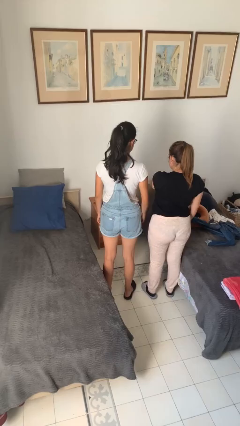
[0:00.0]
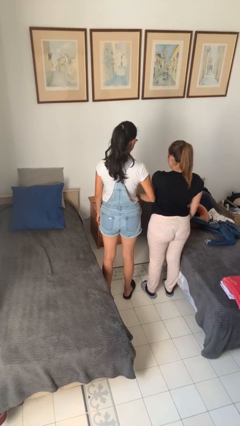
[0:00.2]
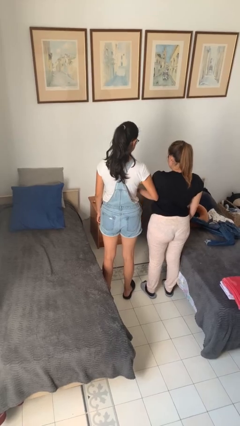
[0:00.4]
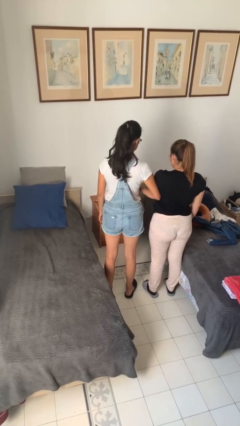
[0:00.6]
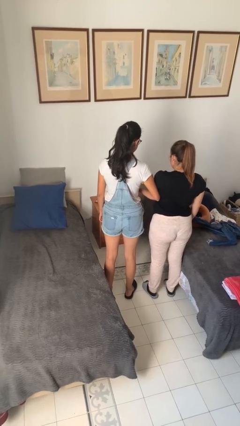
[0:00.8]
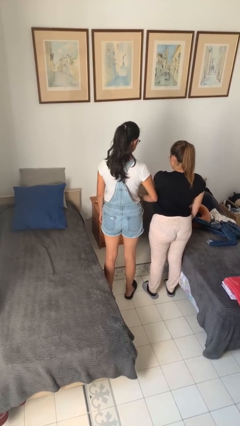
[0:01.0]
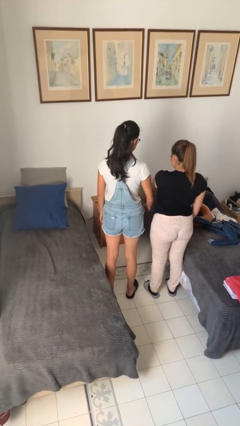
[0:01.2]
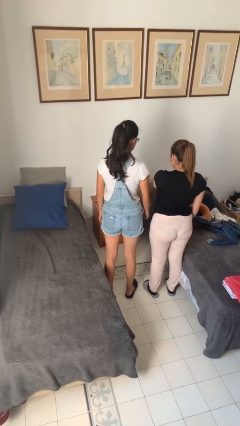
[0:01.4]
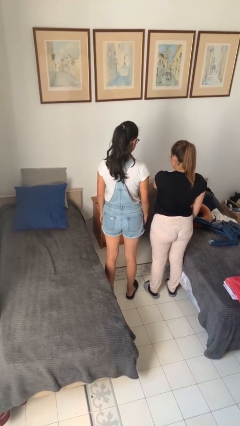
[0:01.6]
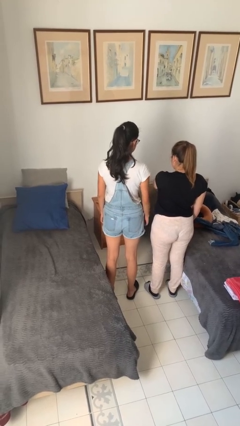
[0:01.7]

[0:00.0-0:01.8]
person nudges person with elbow

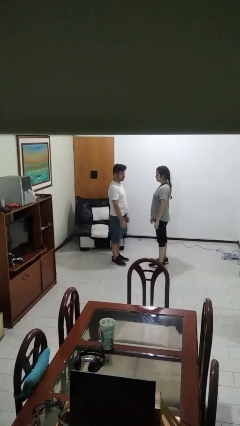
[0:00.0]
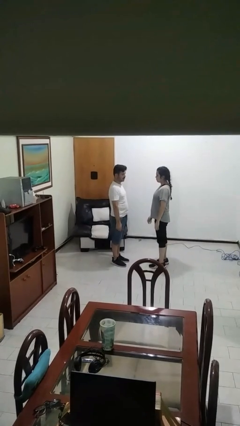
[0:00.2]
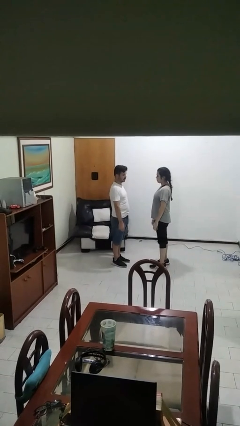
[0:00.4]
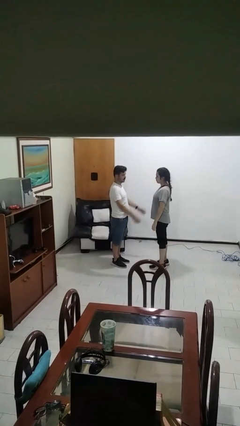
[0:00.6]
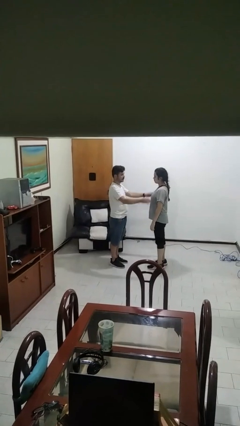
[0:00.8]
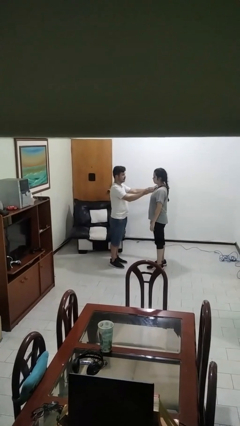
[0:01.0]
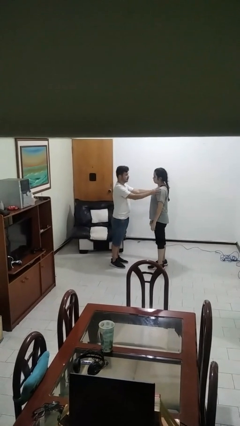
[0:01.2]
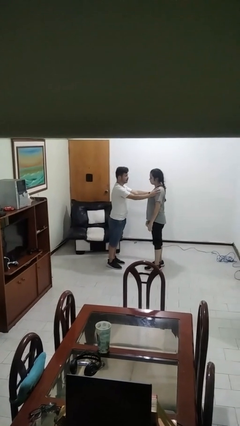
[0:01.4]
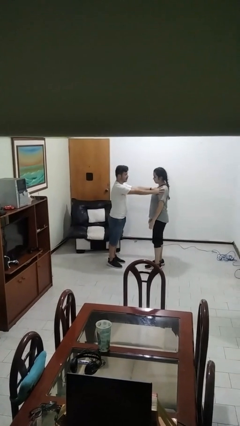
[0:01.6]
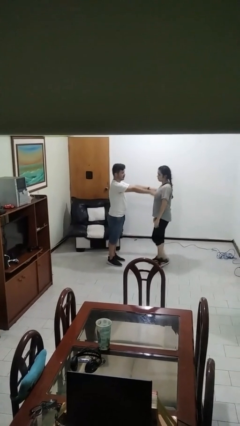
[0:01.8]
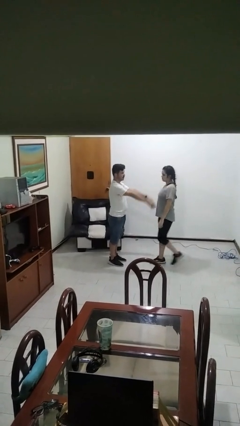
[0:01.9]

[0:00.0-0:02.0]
person shoves person

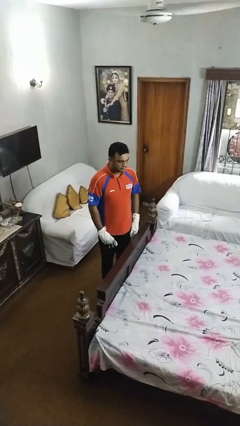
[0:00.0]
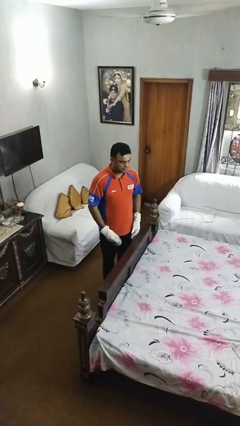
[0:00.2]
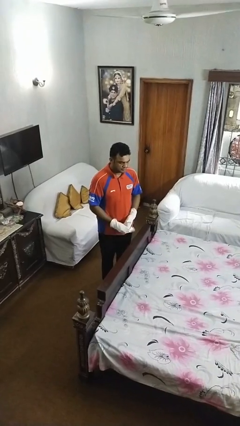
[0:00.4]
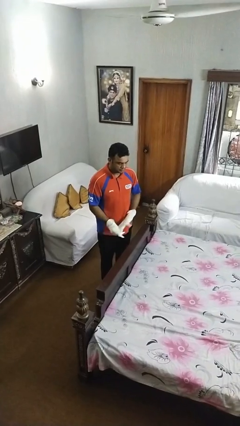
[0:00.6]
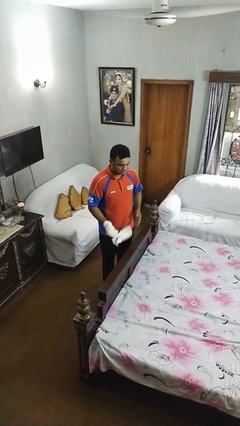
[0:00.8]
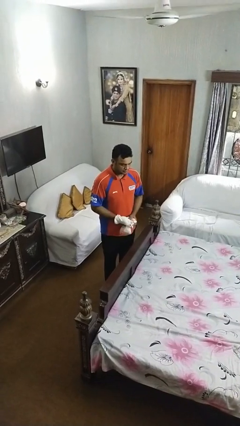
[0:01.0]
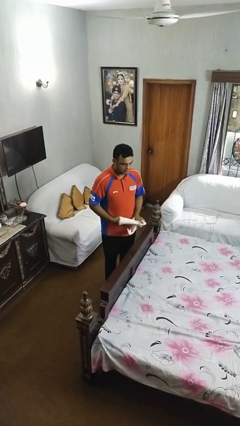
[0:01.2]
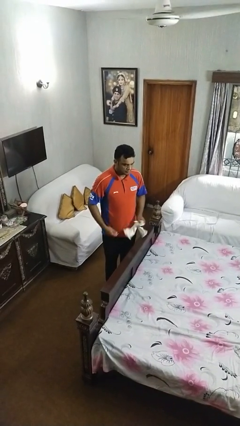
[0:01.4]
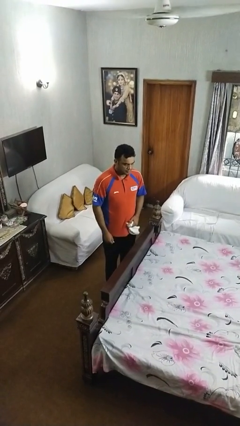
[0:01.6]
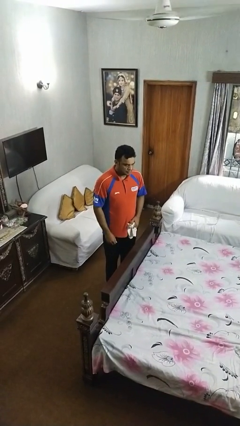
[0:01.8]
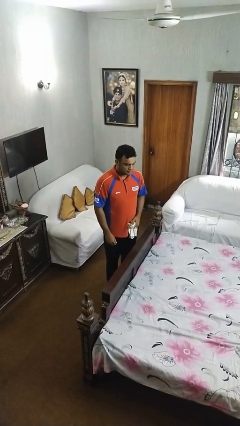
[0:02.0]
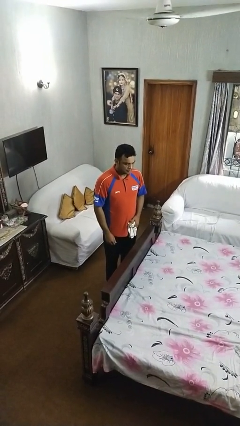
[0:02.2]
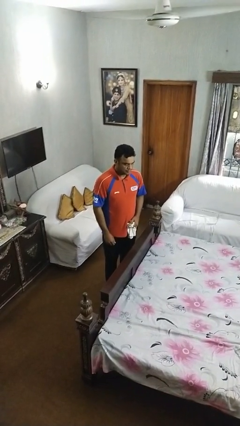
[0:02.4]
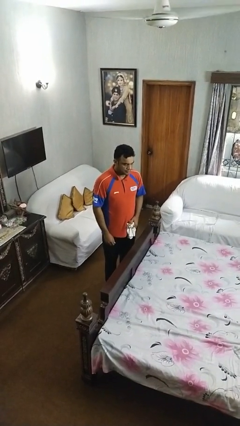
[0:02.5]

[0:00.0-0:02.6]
person takes off gloves

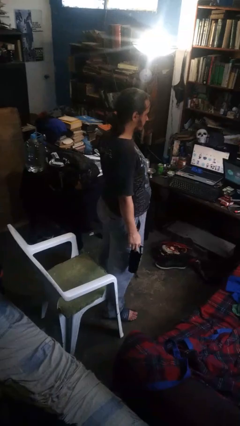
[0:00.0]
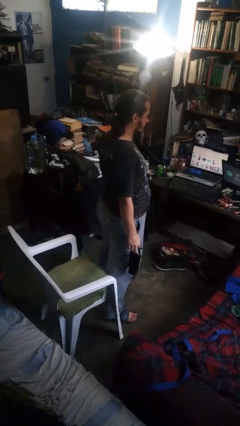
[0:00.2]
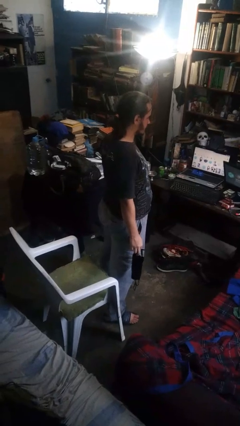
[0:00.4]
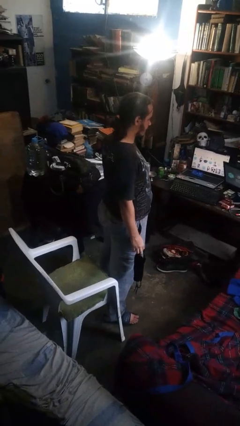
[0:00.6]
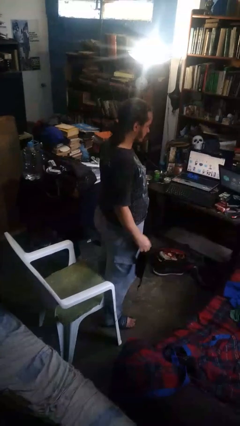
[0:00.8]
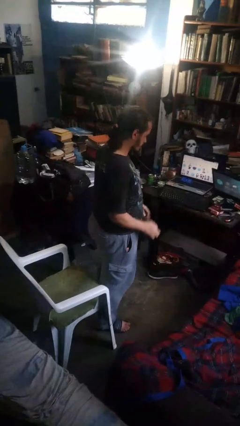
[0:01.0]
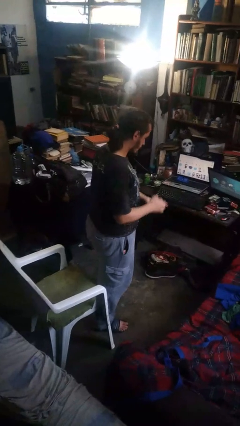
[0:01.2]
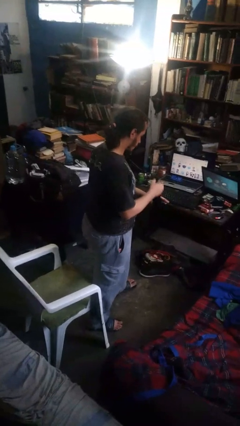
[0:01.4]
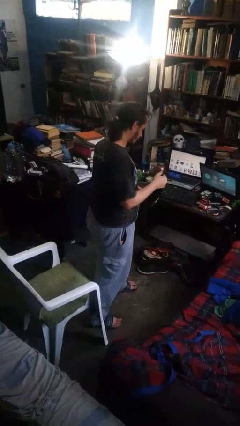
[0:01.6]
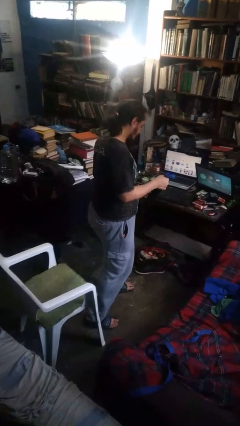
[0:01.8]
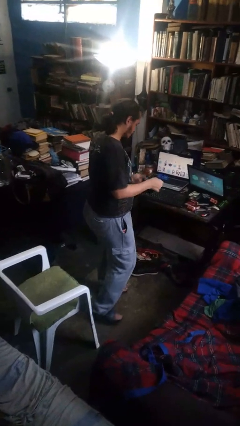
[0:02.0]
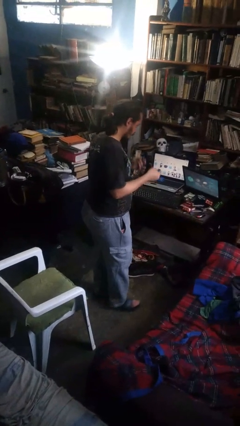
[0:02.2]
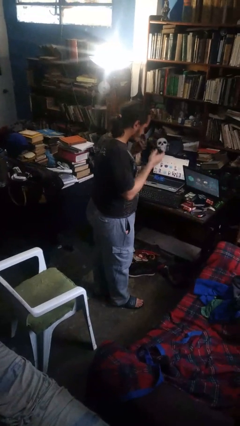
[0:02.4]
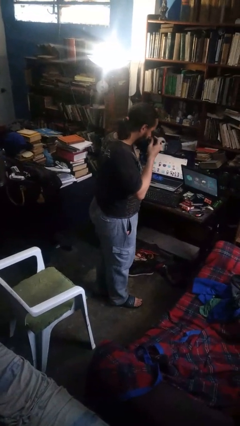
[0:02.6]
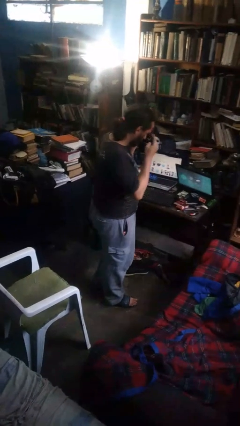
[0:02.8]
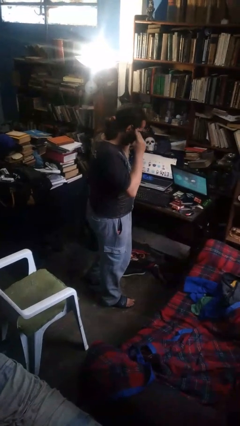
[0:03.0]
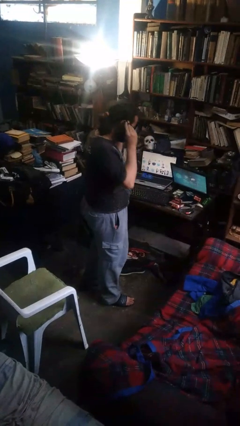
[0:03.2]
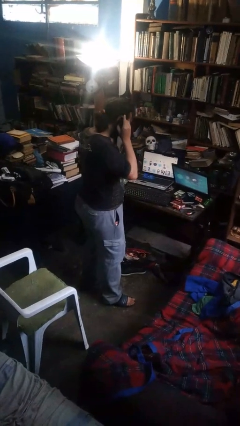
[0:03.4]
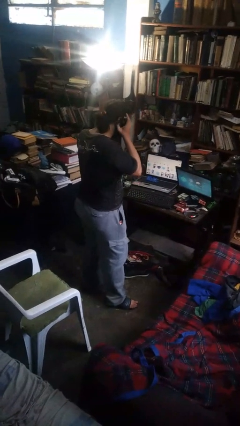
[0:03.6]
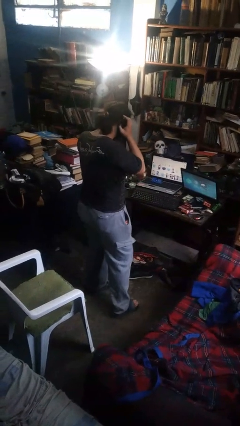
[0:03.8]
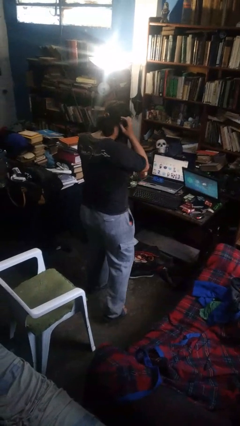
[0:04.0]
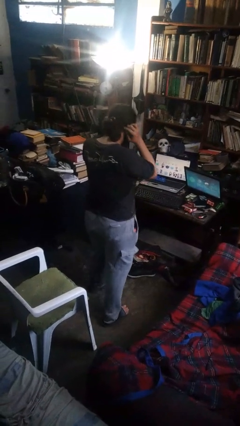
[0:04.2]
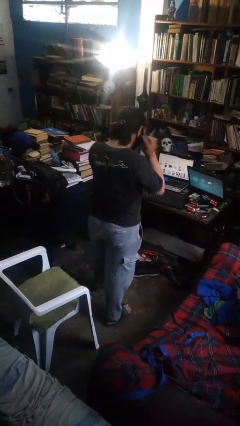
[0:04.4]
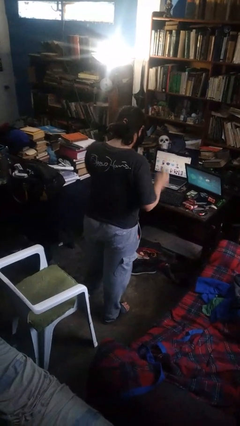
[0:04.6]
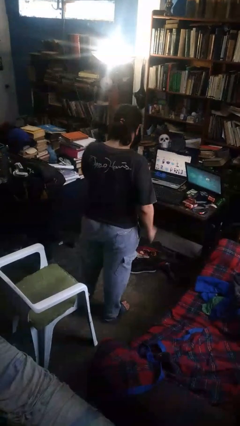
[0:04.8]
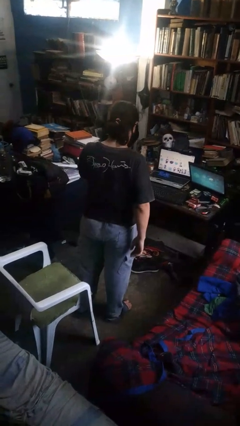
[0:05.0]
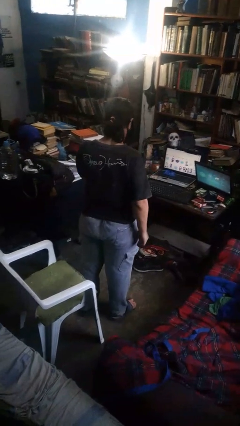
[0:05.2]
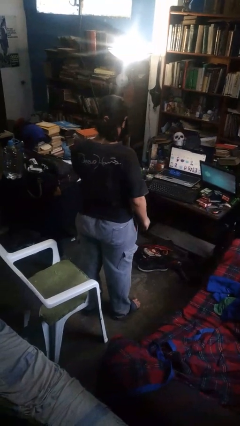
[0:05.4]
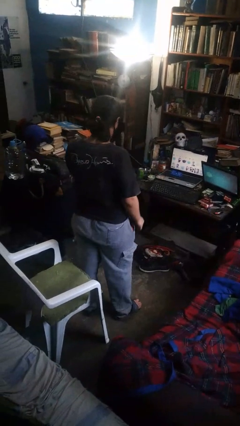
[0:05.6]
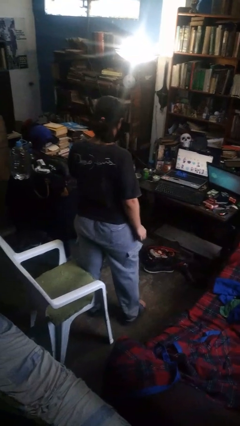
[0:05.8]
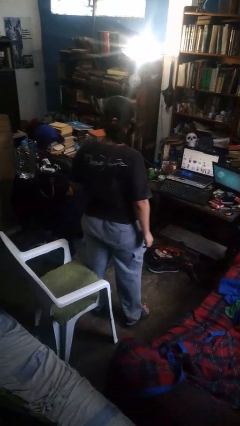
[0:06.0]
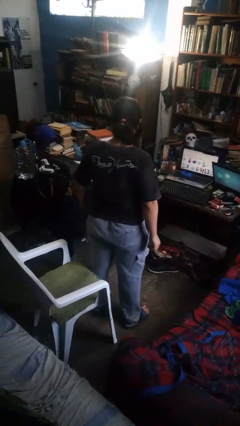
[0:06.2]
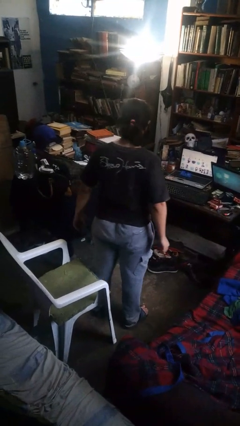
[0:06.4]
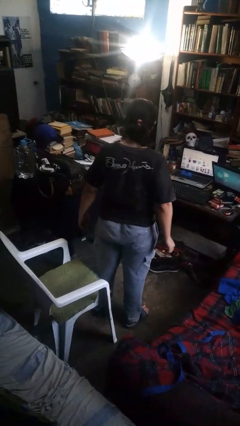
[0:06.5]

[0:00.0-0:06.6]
person puts on facemask

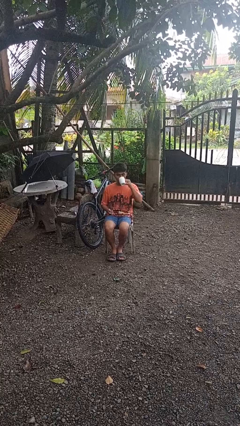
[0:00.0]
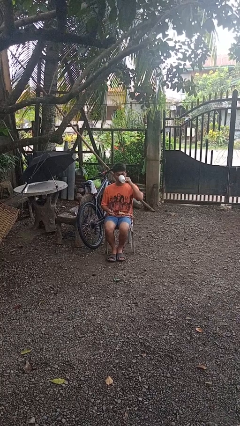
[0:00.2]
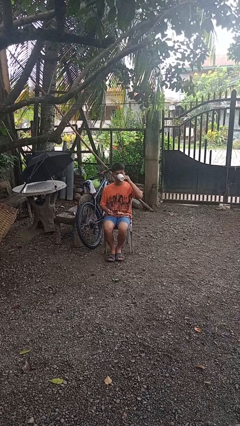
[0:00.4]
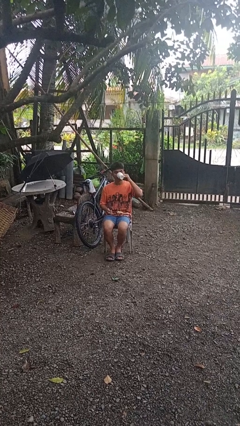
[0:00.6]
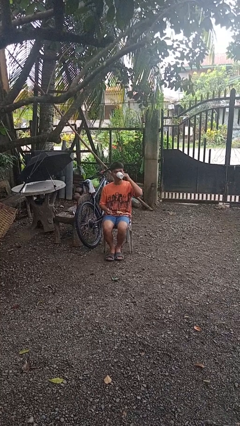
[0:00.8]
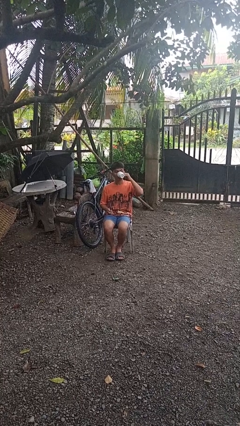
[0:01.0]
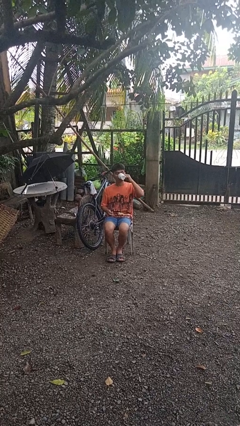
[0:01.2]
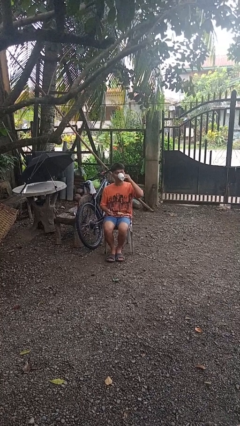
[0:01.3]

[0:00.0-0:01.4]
person drinks from mug

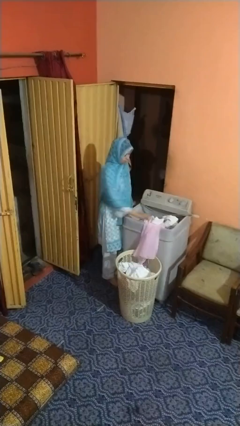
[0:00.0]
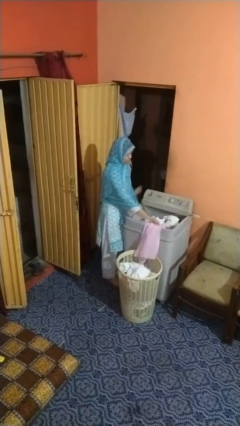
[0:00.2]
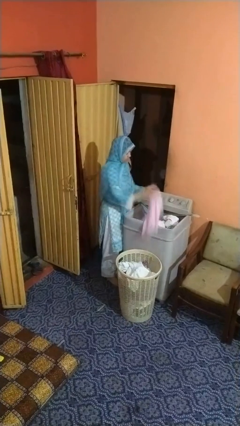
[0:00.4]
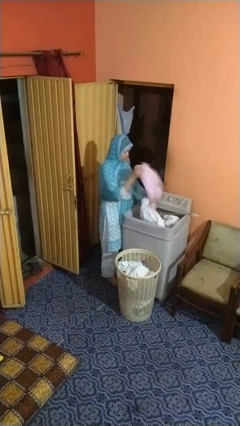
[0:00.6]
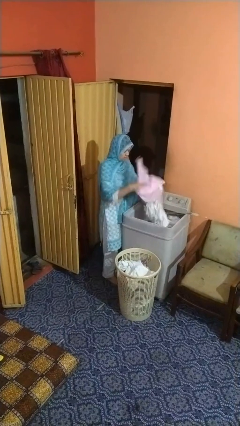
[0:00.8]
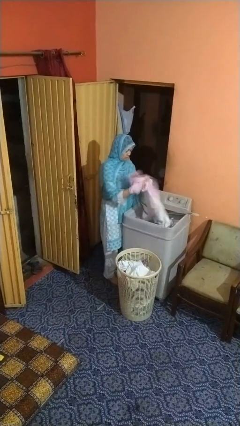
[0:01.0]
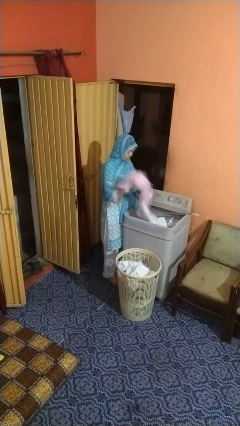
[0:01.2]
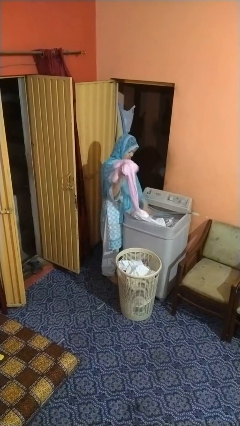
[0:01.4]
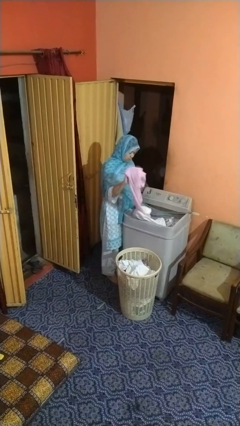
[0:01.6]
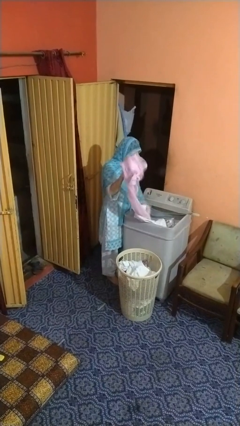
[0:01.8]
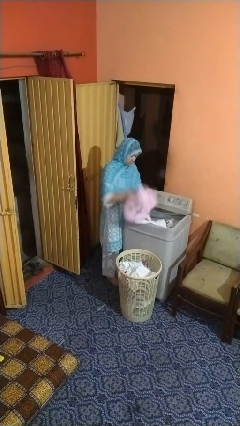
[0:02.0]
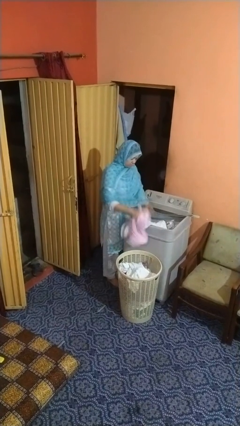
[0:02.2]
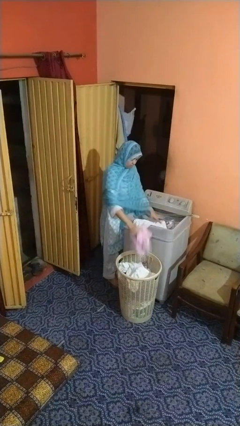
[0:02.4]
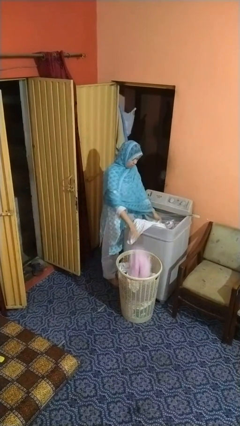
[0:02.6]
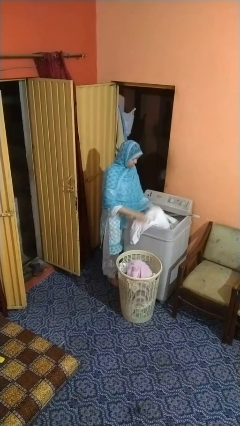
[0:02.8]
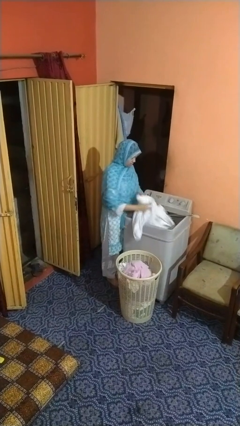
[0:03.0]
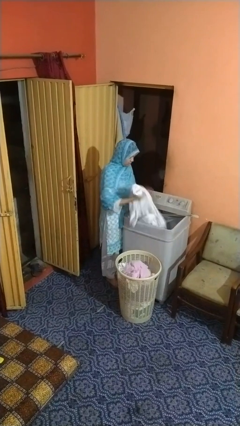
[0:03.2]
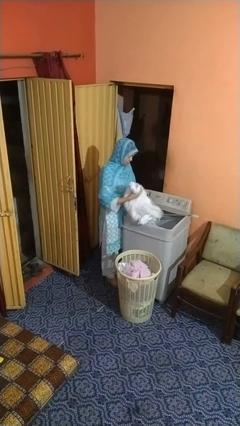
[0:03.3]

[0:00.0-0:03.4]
person unloads clotheswasher
